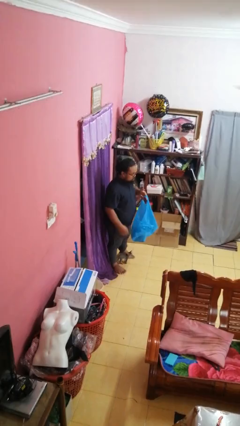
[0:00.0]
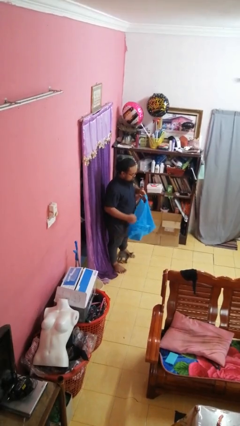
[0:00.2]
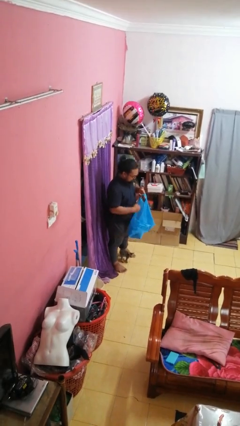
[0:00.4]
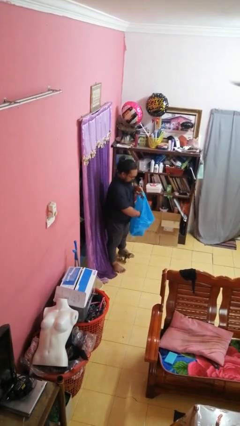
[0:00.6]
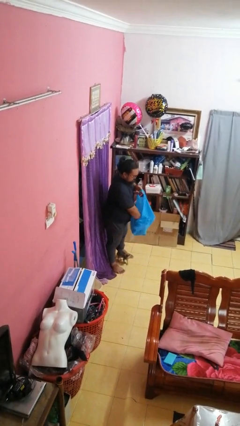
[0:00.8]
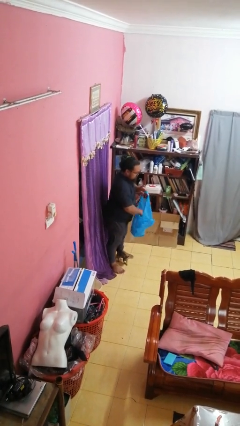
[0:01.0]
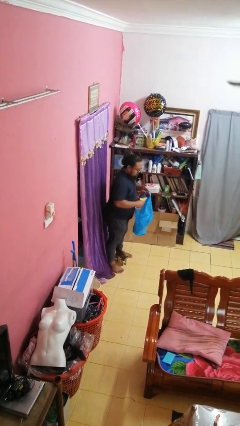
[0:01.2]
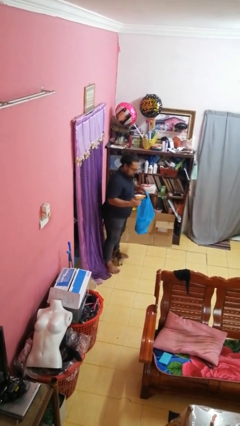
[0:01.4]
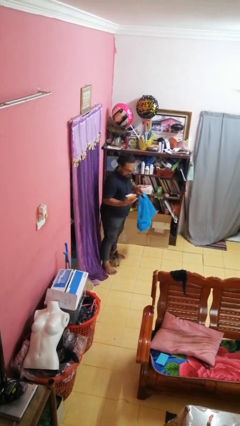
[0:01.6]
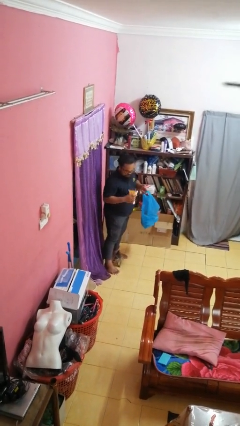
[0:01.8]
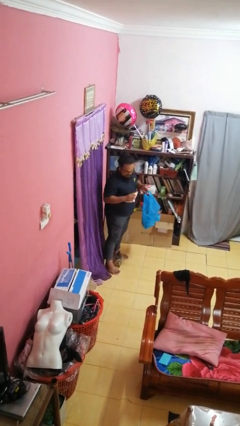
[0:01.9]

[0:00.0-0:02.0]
person takes object from bag

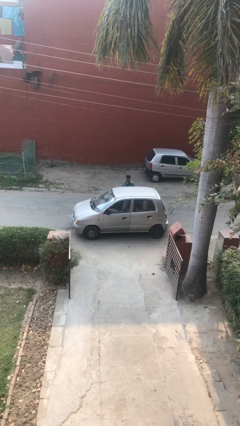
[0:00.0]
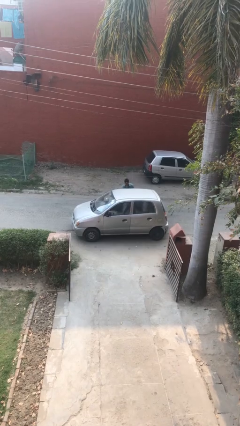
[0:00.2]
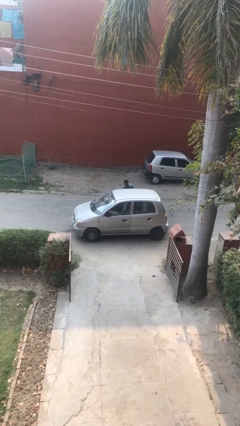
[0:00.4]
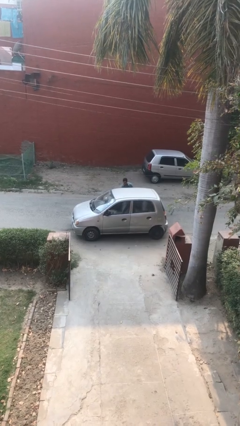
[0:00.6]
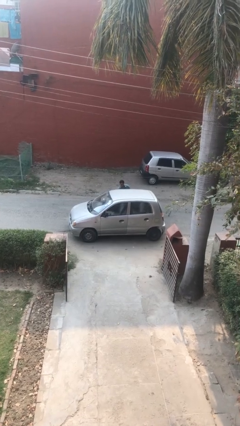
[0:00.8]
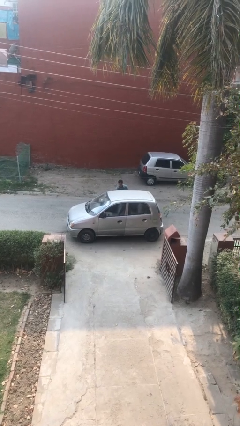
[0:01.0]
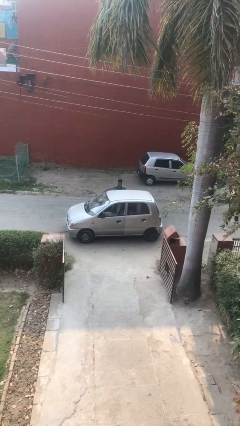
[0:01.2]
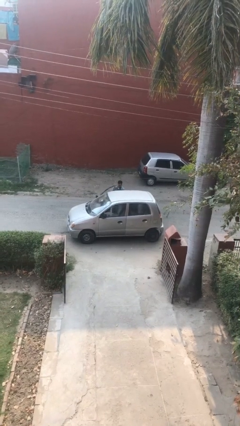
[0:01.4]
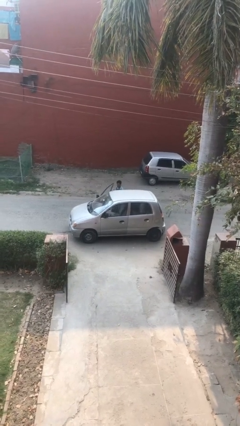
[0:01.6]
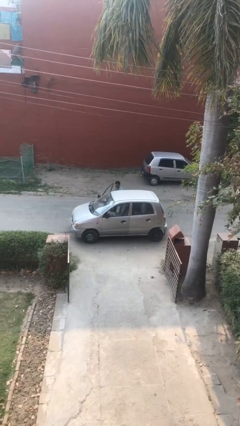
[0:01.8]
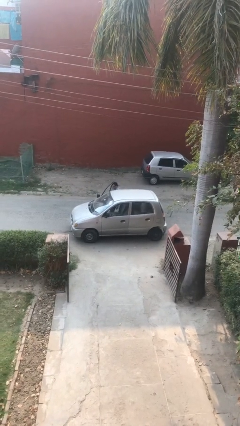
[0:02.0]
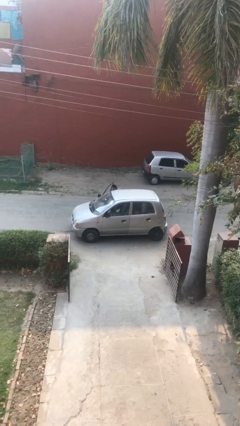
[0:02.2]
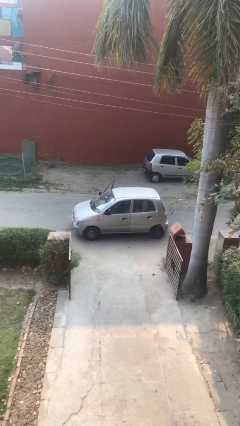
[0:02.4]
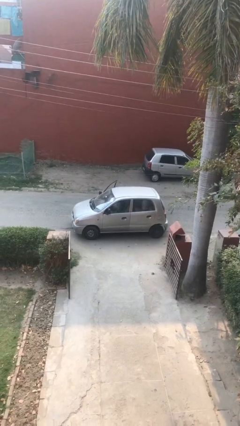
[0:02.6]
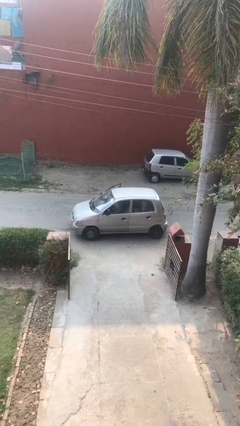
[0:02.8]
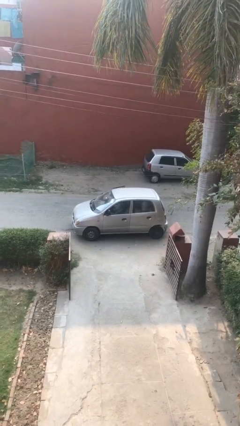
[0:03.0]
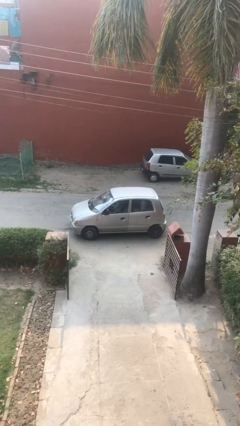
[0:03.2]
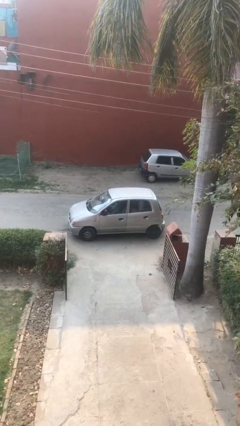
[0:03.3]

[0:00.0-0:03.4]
car picks up person

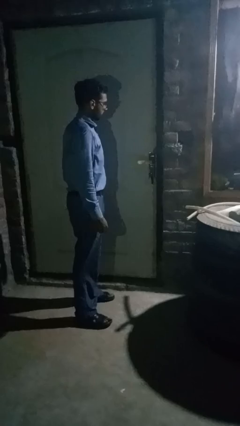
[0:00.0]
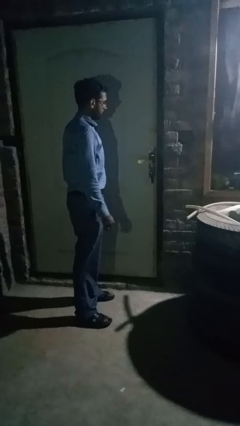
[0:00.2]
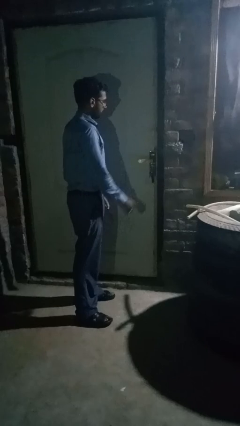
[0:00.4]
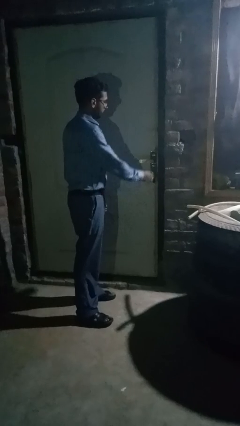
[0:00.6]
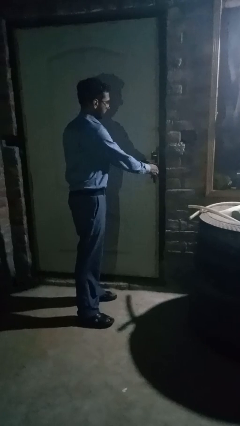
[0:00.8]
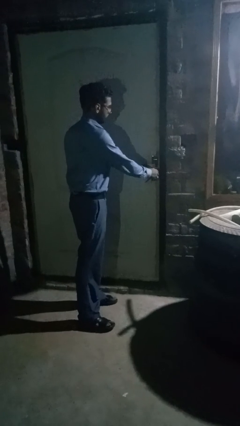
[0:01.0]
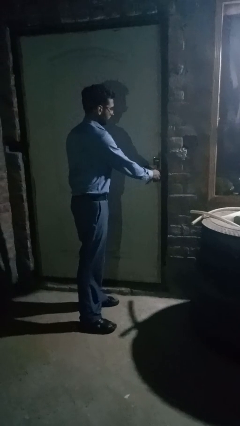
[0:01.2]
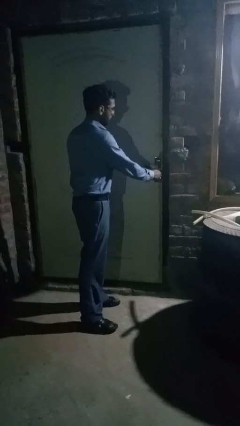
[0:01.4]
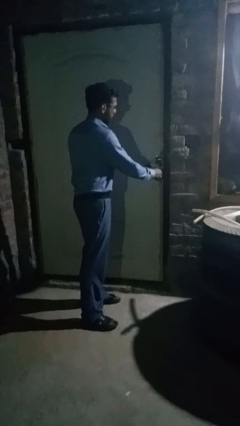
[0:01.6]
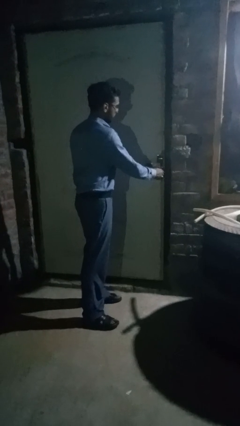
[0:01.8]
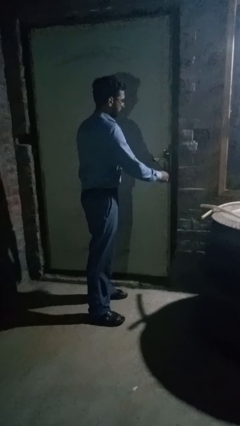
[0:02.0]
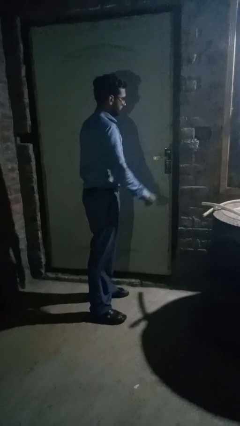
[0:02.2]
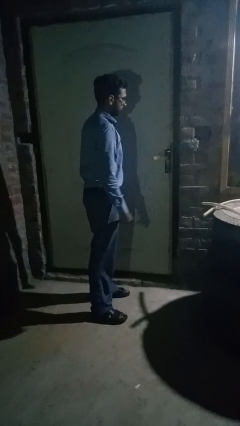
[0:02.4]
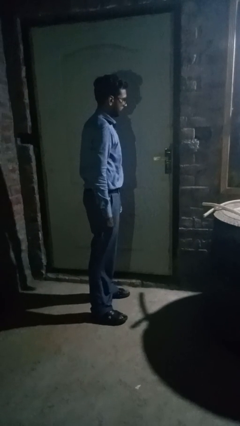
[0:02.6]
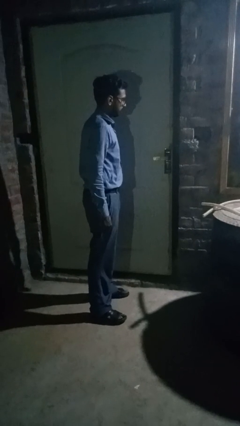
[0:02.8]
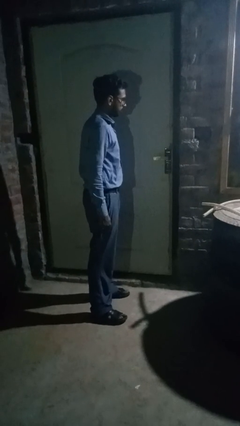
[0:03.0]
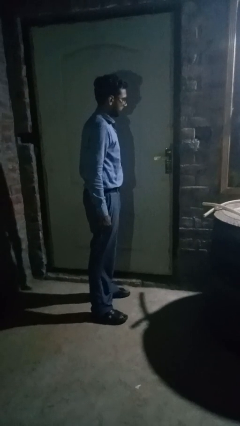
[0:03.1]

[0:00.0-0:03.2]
person locks door with keys

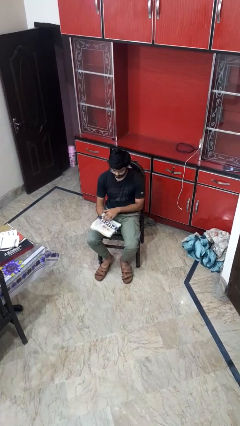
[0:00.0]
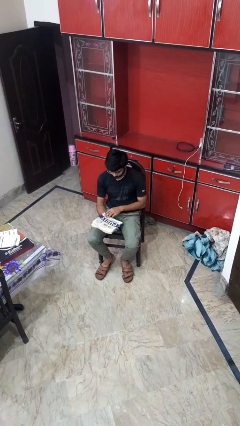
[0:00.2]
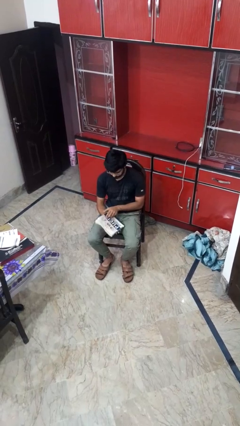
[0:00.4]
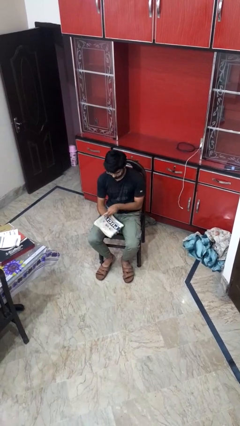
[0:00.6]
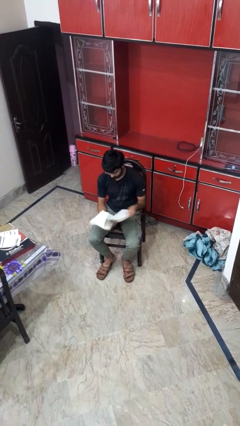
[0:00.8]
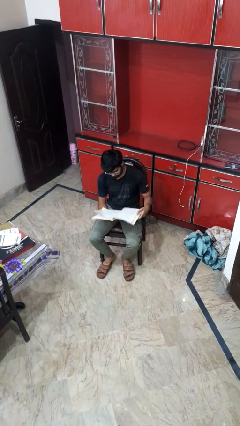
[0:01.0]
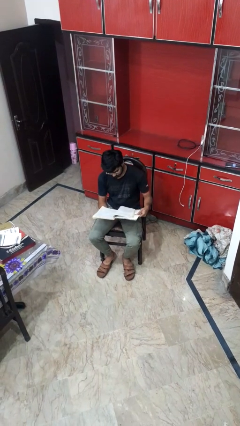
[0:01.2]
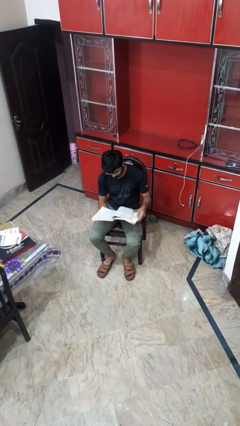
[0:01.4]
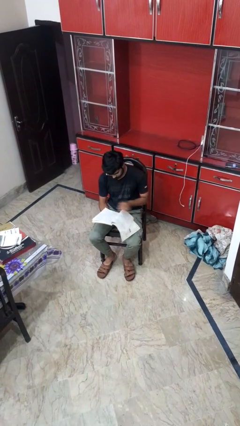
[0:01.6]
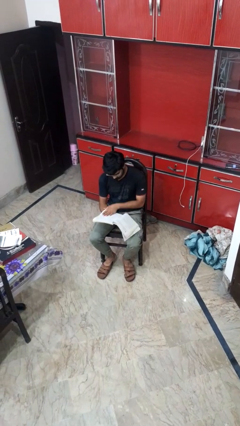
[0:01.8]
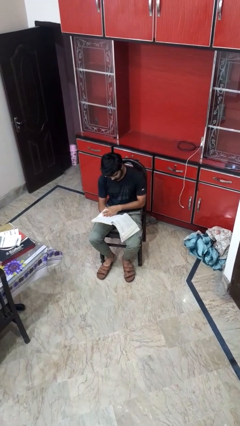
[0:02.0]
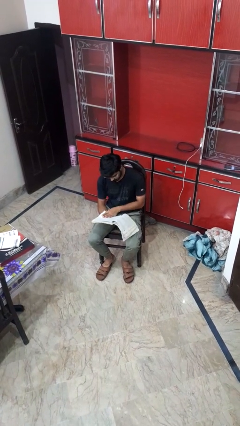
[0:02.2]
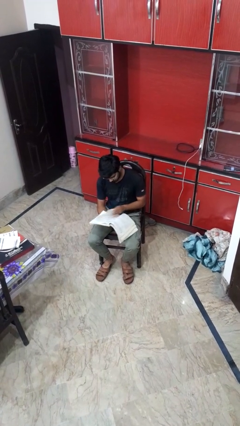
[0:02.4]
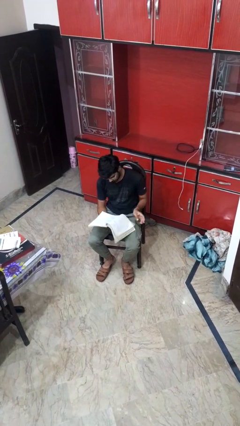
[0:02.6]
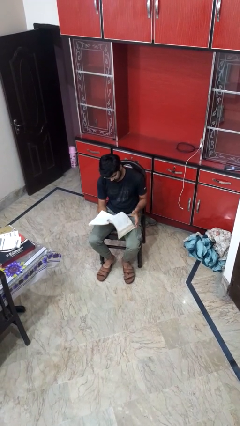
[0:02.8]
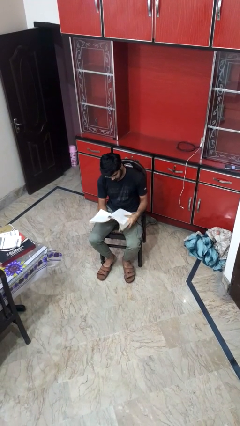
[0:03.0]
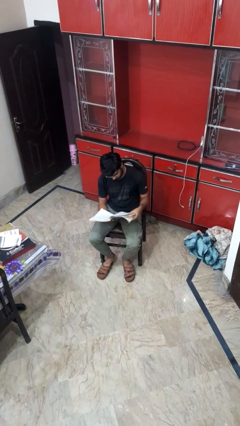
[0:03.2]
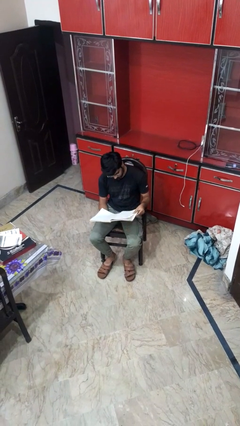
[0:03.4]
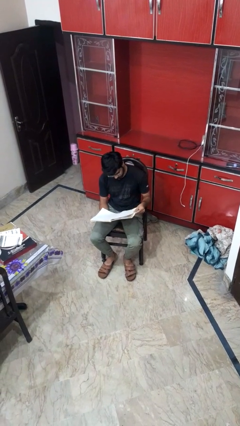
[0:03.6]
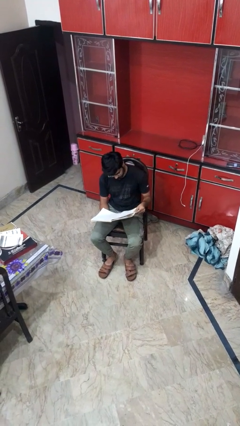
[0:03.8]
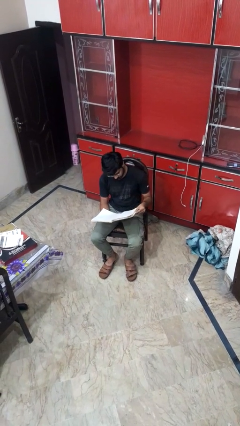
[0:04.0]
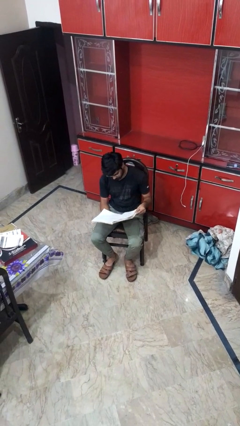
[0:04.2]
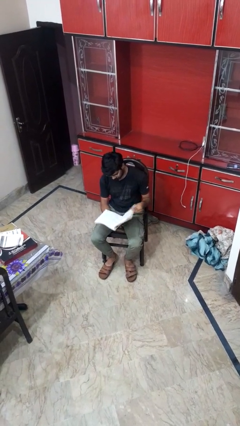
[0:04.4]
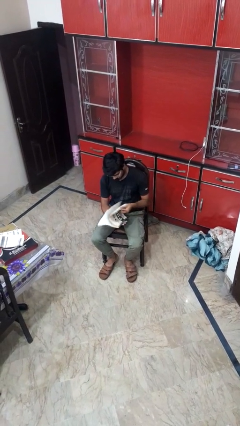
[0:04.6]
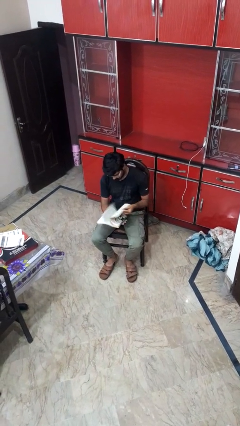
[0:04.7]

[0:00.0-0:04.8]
person reads magazine

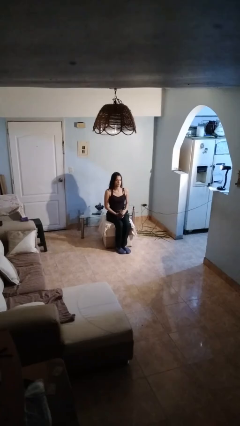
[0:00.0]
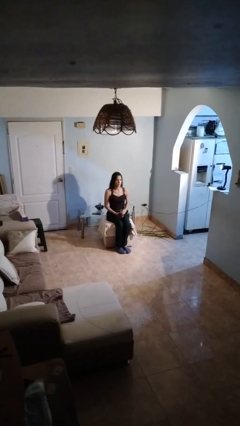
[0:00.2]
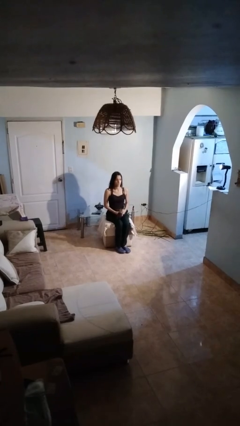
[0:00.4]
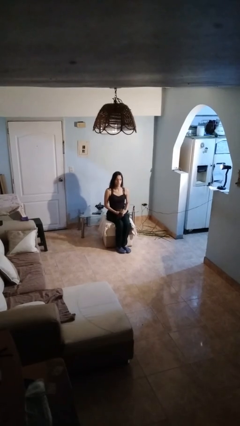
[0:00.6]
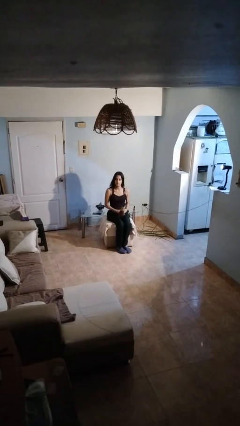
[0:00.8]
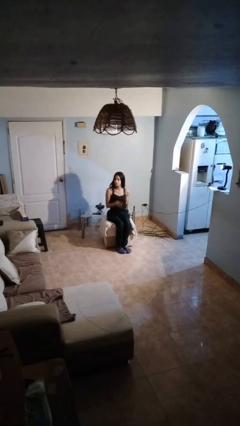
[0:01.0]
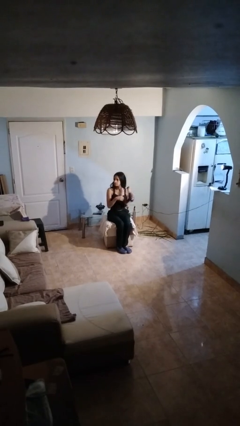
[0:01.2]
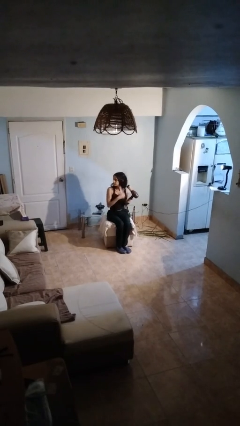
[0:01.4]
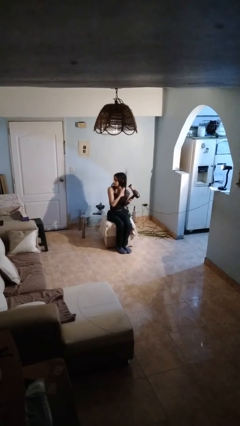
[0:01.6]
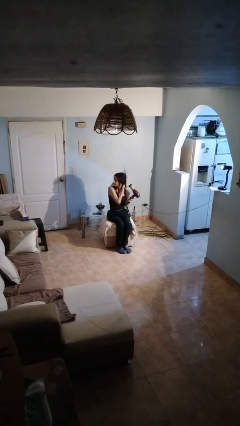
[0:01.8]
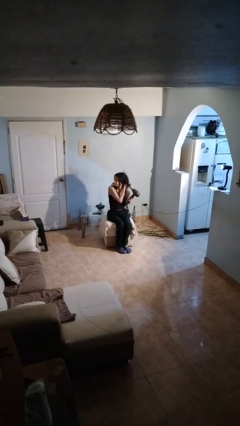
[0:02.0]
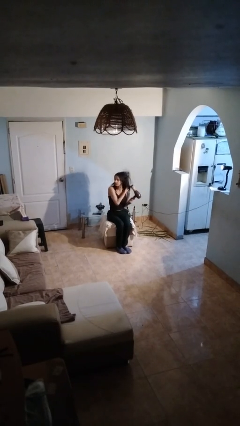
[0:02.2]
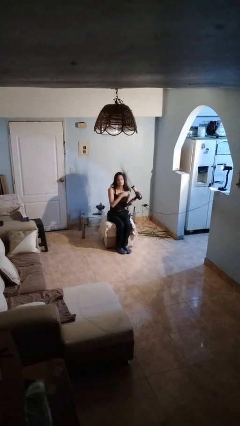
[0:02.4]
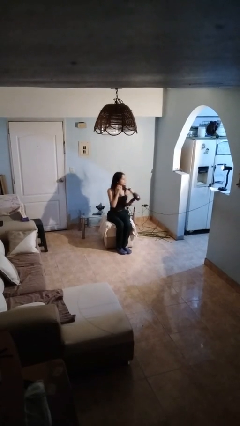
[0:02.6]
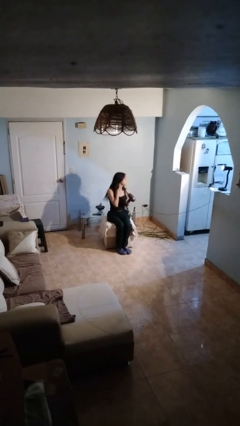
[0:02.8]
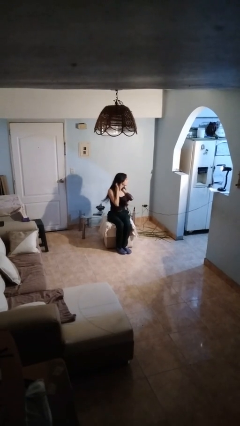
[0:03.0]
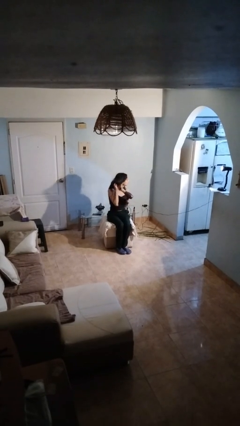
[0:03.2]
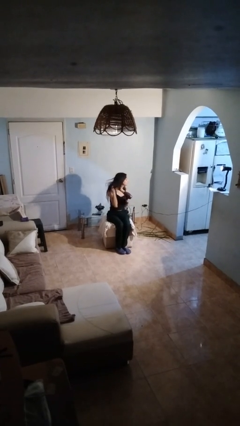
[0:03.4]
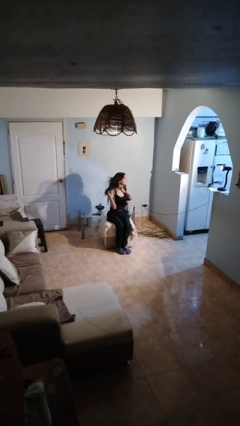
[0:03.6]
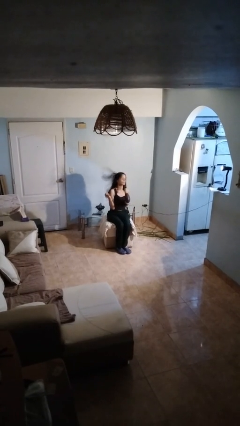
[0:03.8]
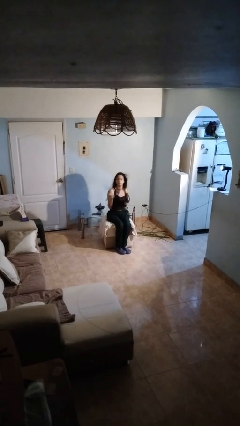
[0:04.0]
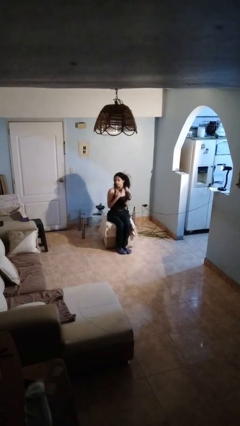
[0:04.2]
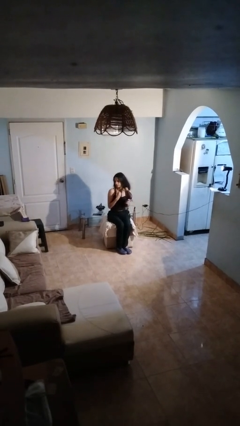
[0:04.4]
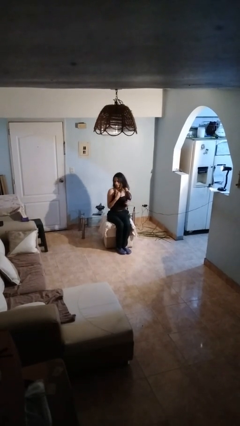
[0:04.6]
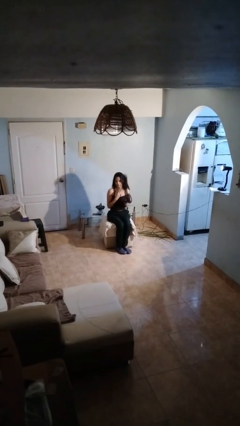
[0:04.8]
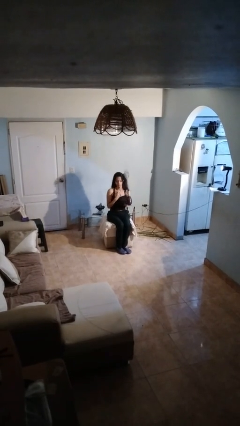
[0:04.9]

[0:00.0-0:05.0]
person dries hair with hairdryer
